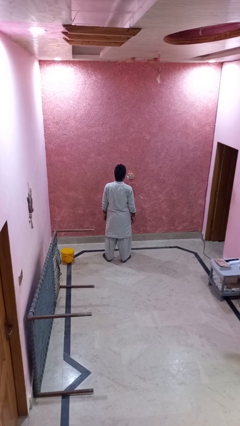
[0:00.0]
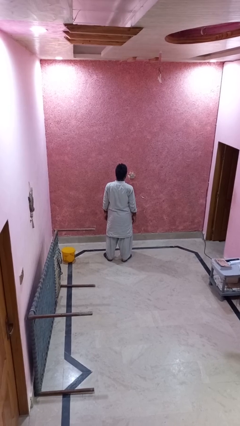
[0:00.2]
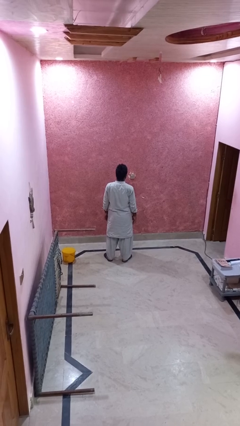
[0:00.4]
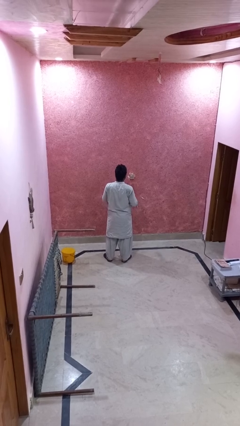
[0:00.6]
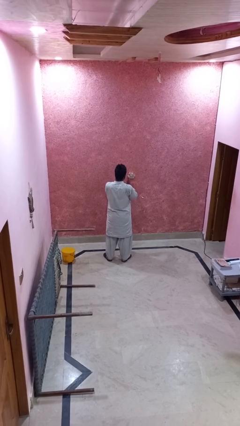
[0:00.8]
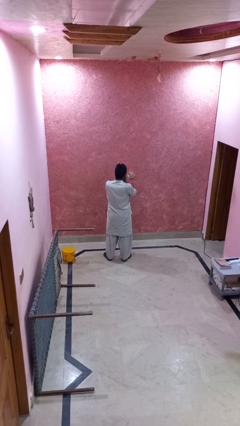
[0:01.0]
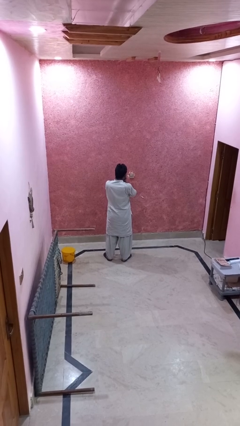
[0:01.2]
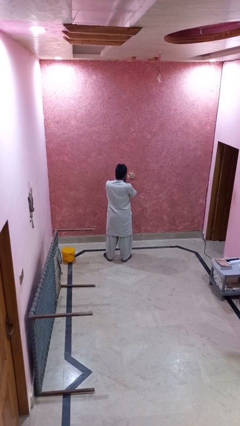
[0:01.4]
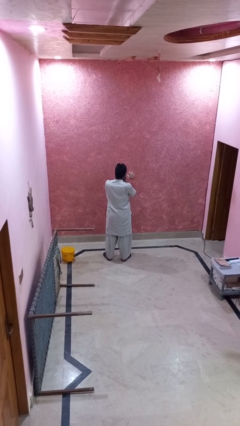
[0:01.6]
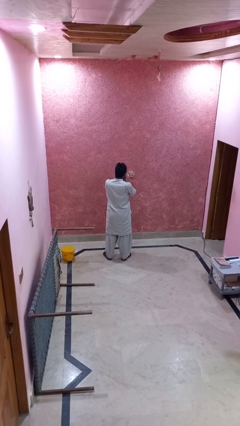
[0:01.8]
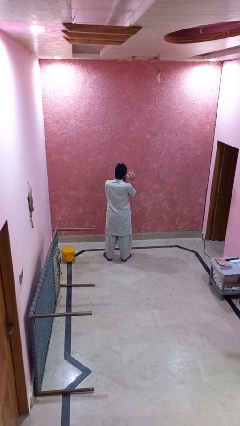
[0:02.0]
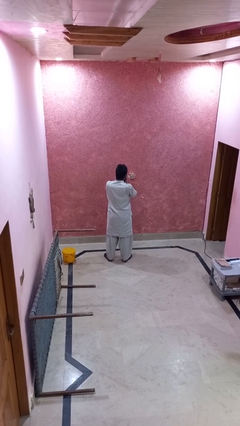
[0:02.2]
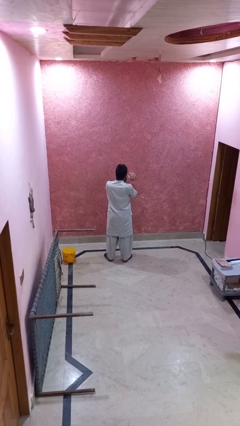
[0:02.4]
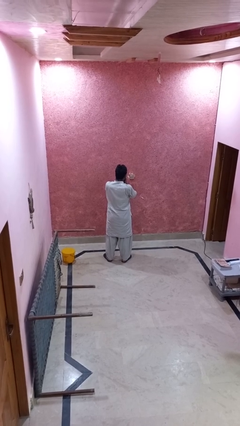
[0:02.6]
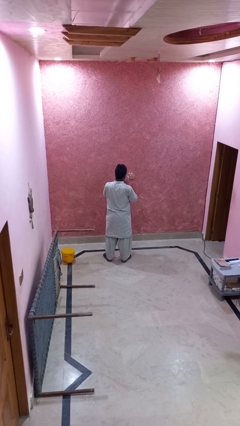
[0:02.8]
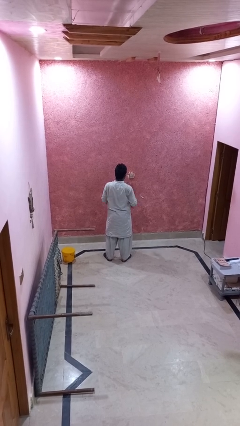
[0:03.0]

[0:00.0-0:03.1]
person sneezes into hand

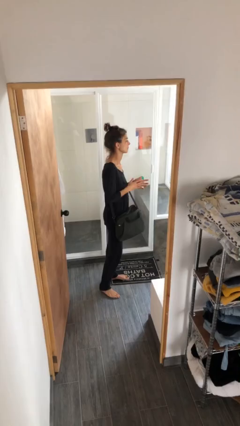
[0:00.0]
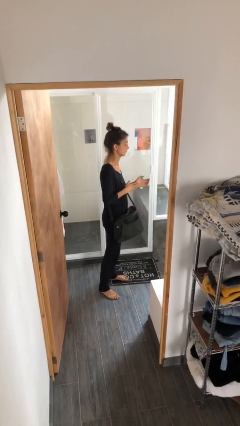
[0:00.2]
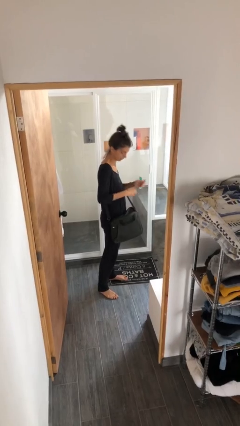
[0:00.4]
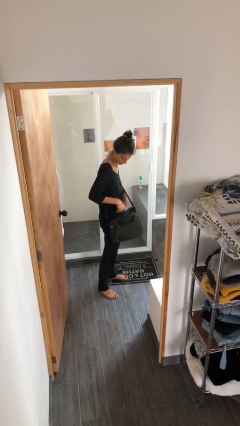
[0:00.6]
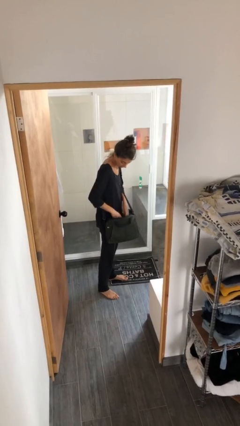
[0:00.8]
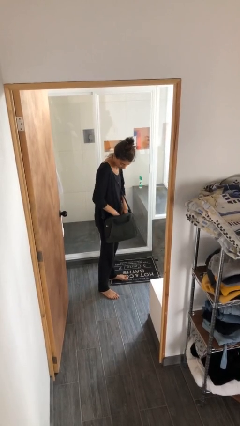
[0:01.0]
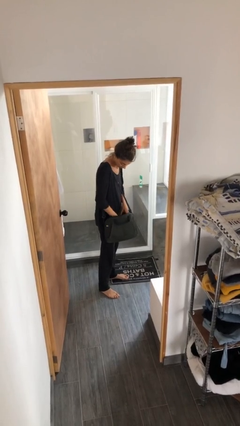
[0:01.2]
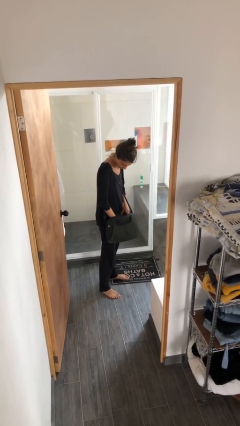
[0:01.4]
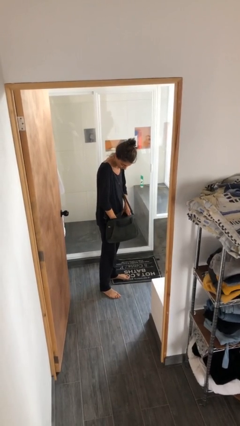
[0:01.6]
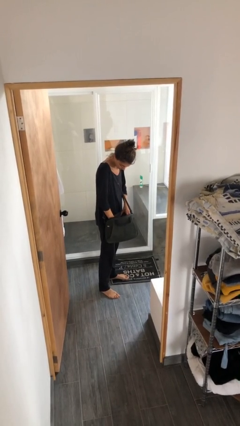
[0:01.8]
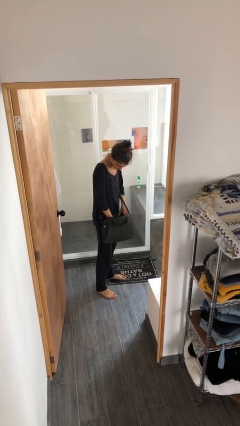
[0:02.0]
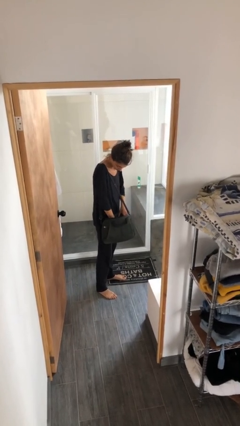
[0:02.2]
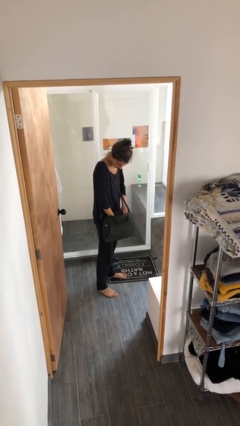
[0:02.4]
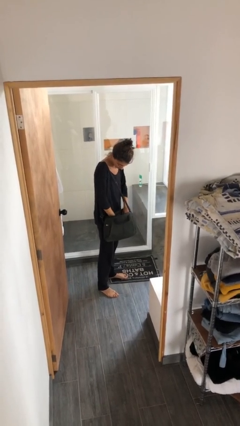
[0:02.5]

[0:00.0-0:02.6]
person searches in purse

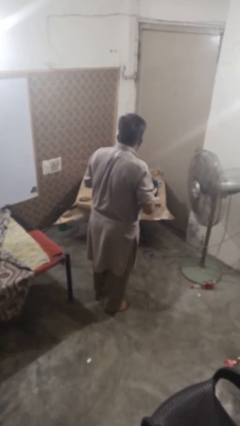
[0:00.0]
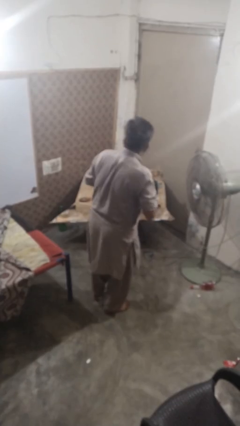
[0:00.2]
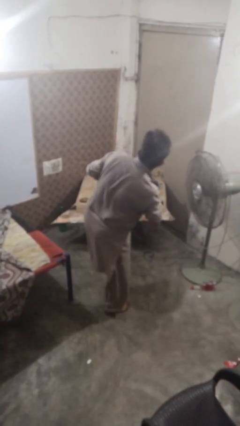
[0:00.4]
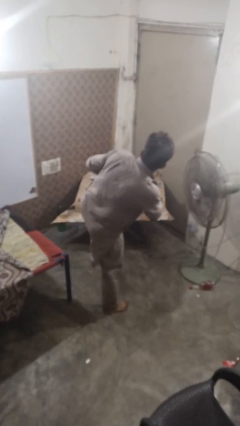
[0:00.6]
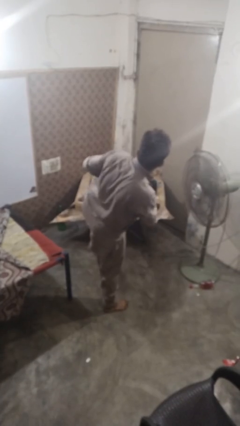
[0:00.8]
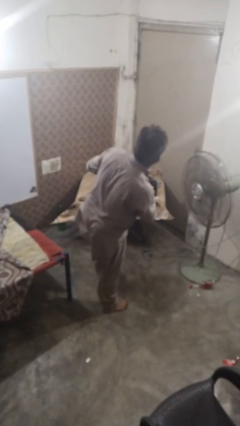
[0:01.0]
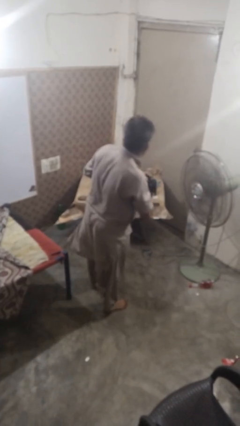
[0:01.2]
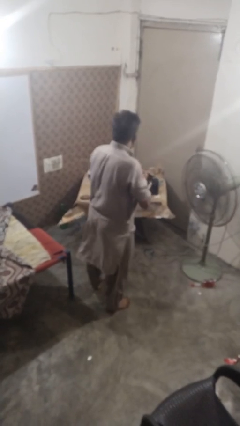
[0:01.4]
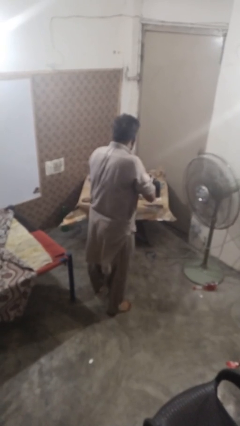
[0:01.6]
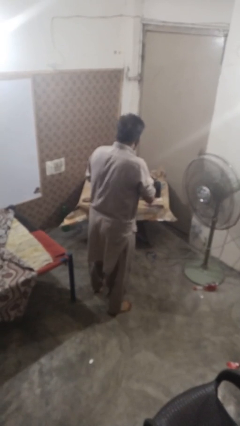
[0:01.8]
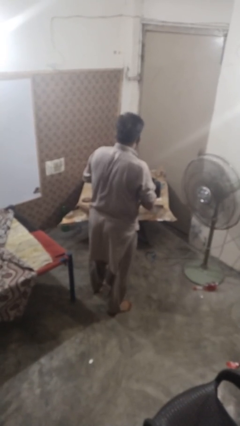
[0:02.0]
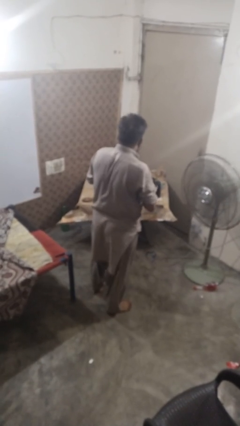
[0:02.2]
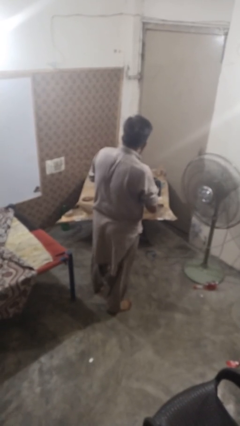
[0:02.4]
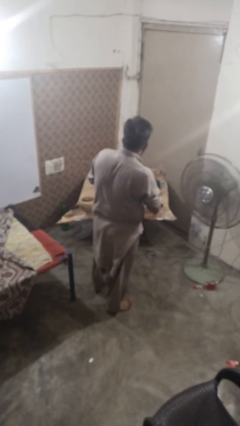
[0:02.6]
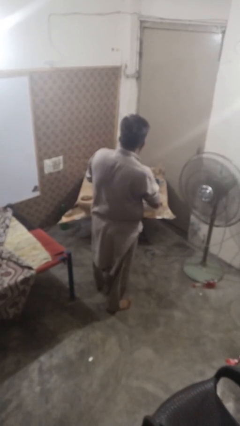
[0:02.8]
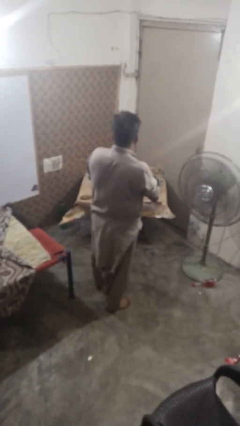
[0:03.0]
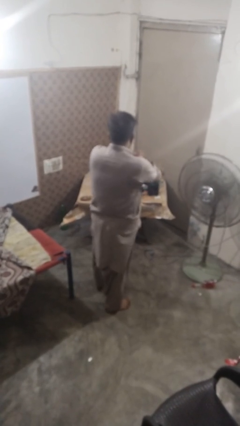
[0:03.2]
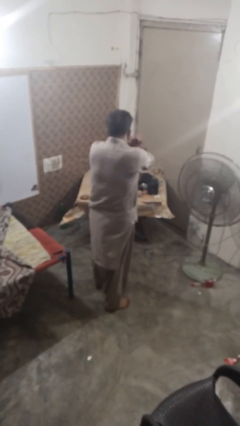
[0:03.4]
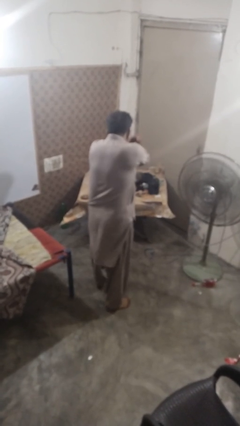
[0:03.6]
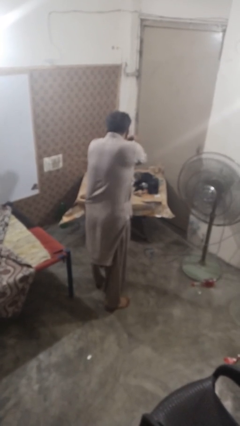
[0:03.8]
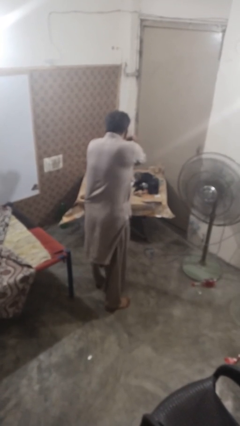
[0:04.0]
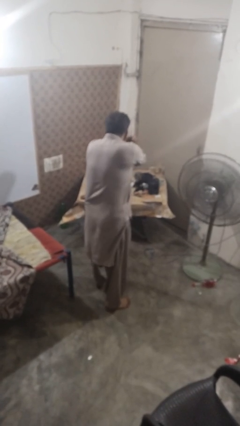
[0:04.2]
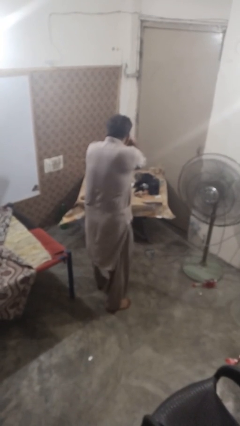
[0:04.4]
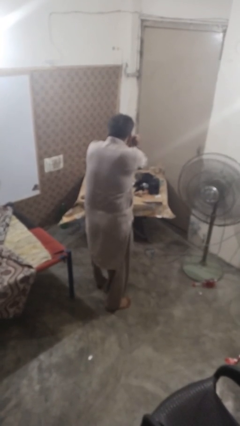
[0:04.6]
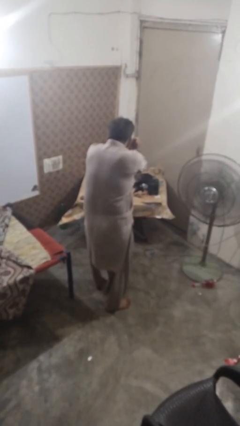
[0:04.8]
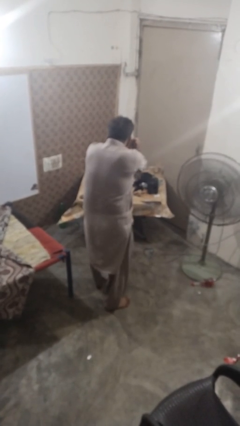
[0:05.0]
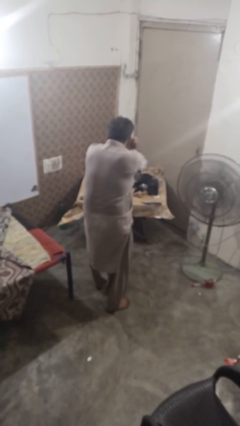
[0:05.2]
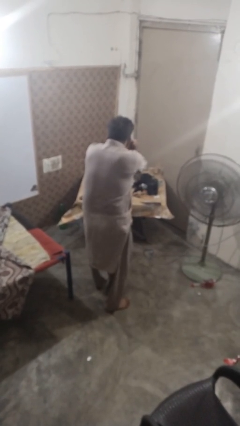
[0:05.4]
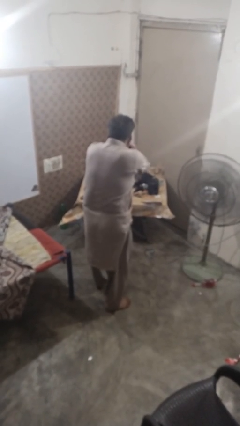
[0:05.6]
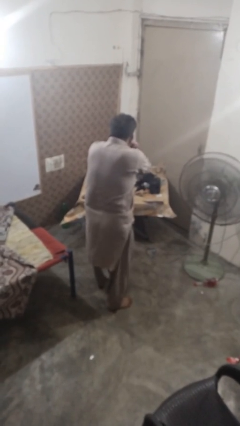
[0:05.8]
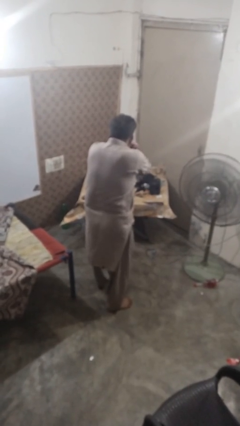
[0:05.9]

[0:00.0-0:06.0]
person karate kicks

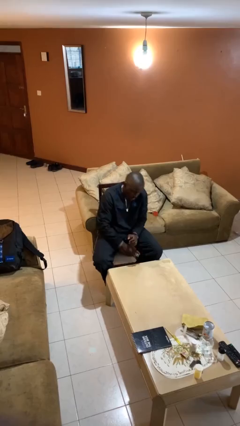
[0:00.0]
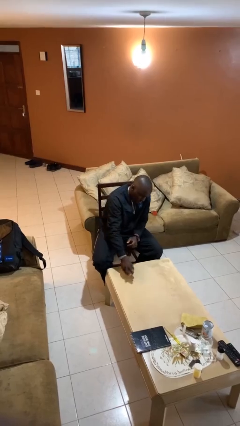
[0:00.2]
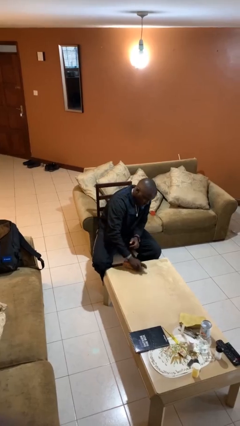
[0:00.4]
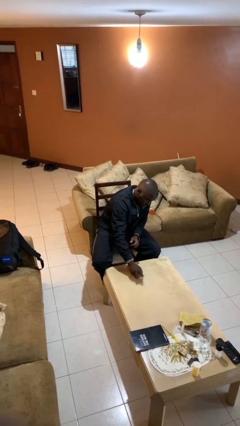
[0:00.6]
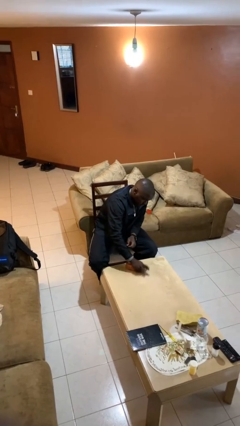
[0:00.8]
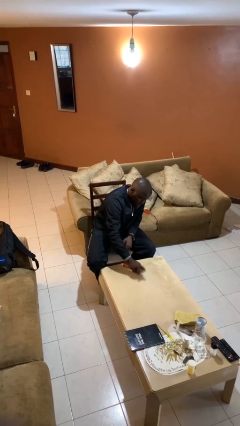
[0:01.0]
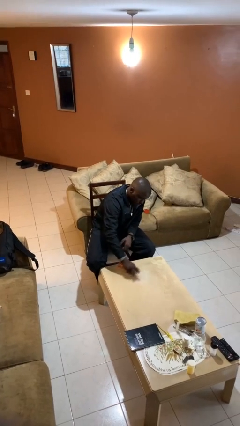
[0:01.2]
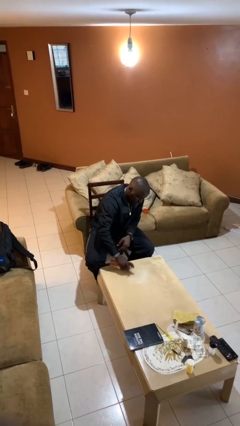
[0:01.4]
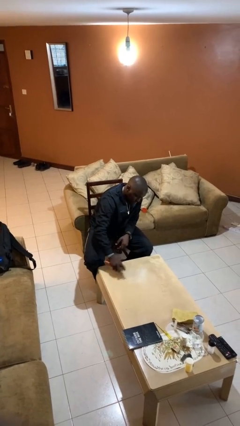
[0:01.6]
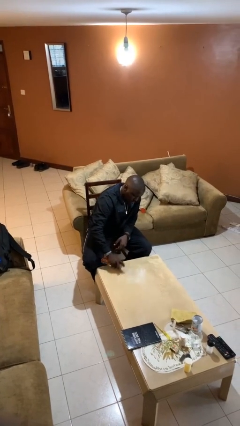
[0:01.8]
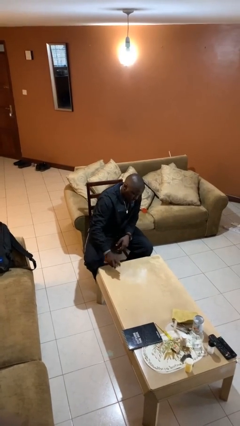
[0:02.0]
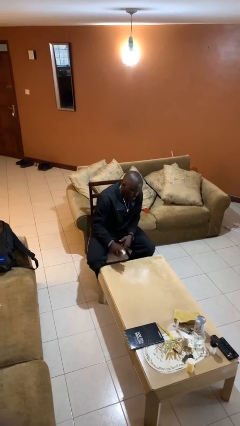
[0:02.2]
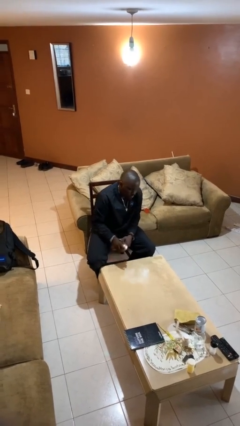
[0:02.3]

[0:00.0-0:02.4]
person sprays from bottle

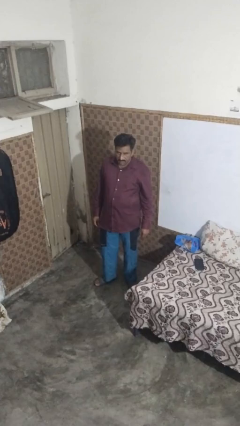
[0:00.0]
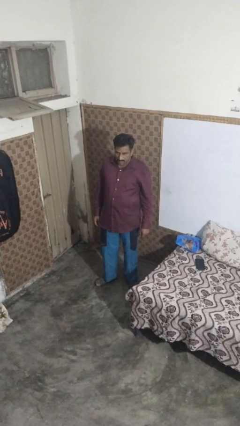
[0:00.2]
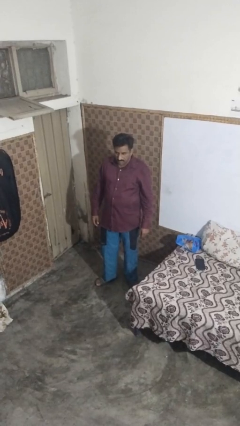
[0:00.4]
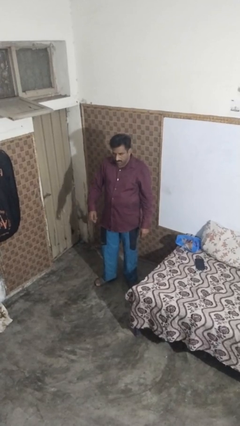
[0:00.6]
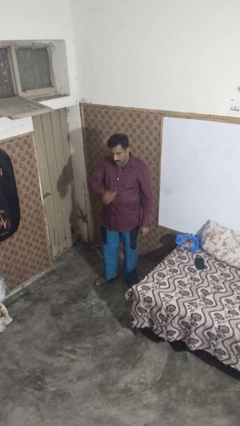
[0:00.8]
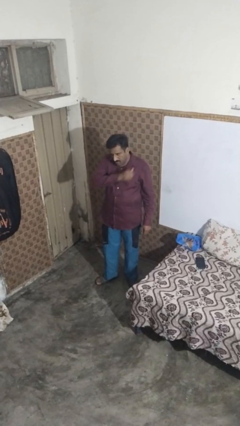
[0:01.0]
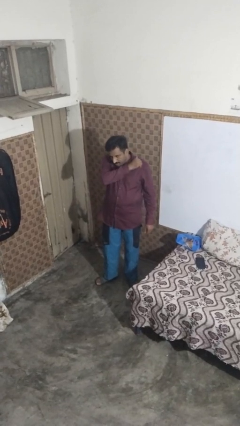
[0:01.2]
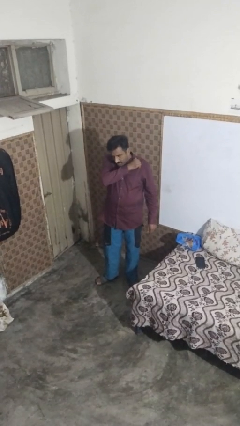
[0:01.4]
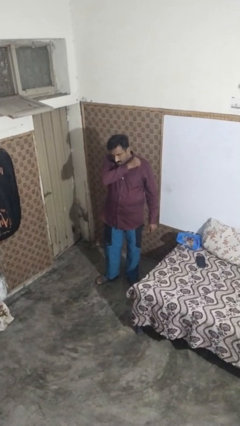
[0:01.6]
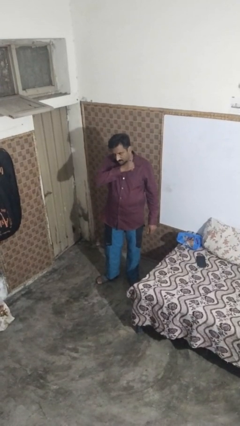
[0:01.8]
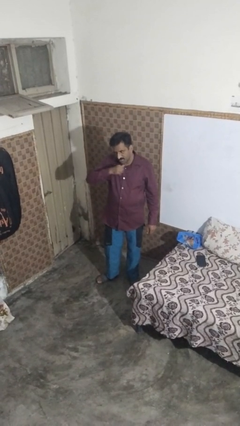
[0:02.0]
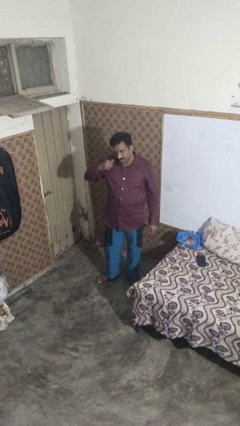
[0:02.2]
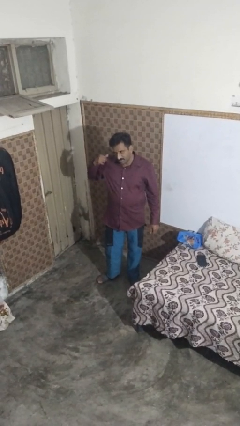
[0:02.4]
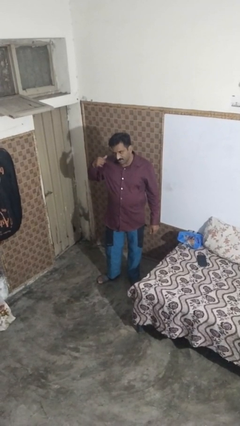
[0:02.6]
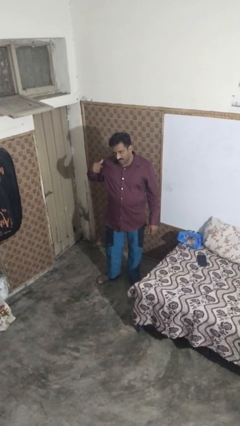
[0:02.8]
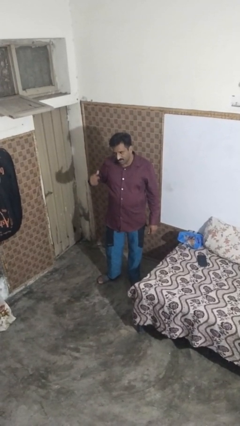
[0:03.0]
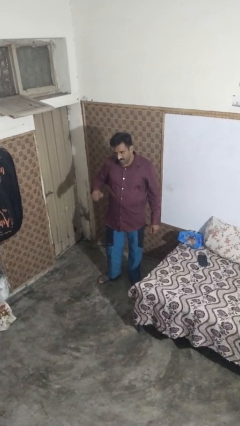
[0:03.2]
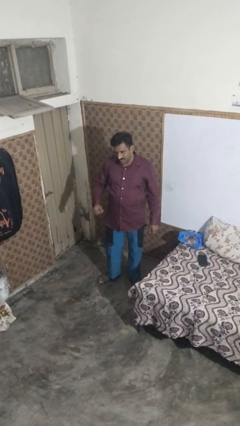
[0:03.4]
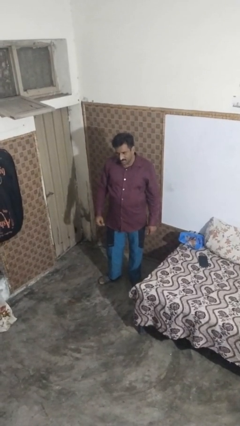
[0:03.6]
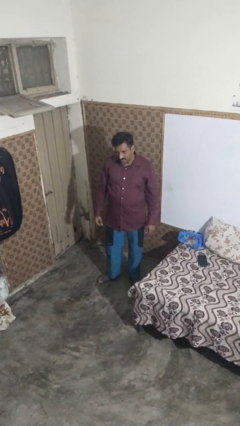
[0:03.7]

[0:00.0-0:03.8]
person gestures cut
